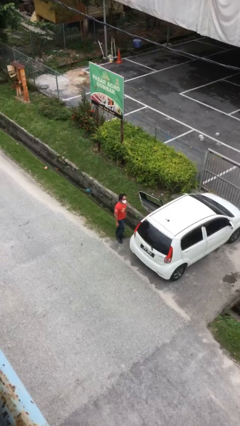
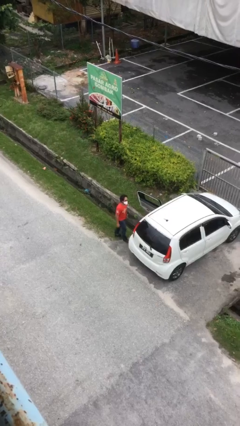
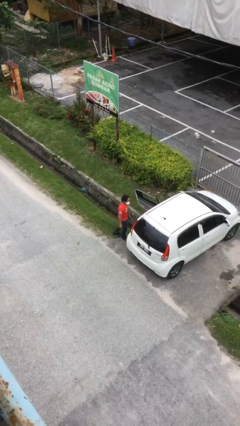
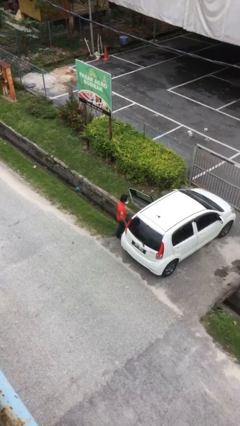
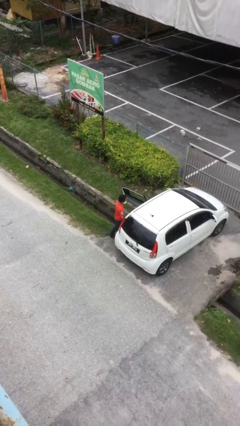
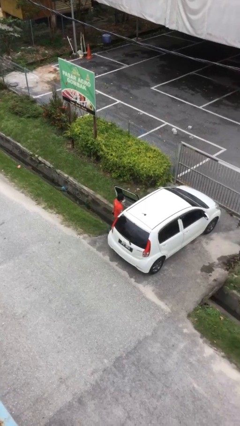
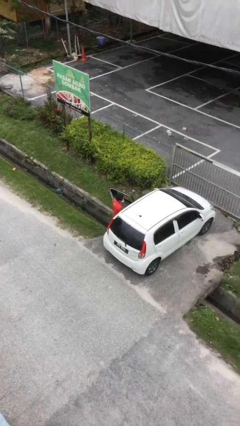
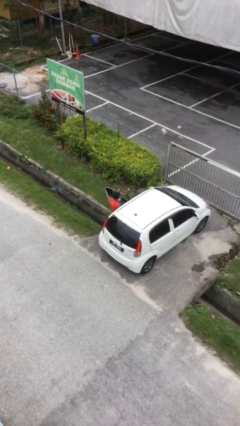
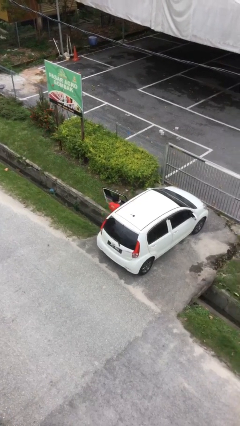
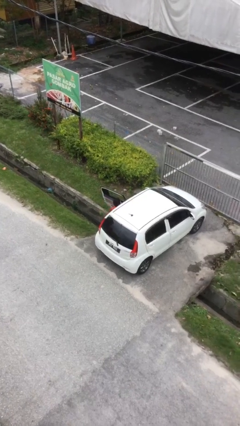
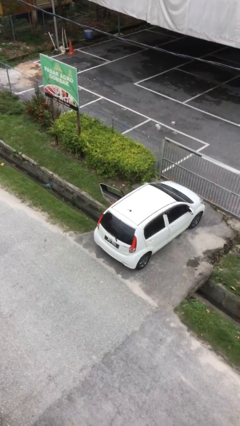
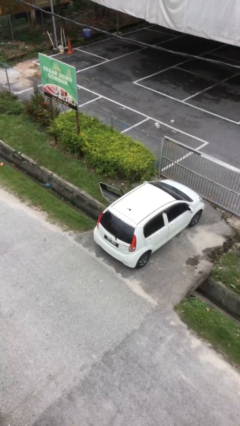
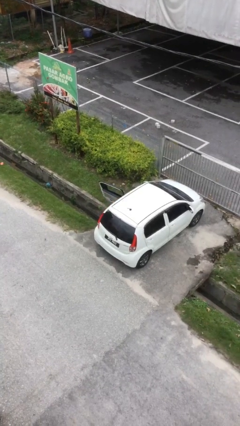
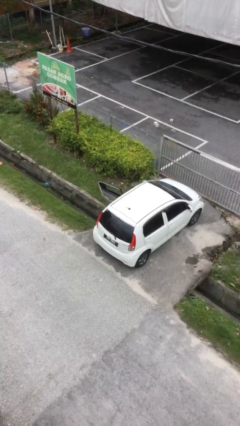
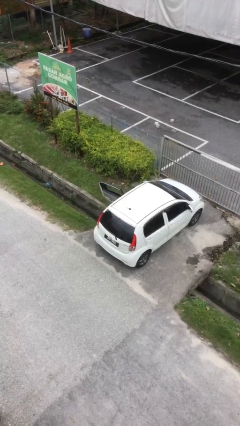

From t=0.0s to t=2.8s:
person enters car

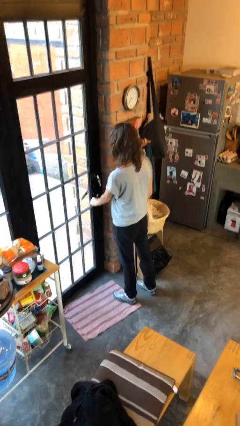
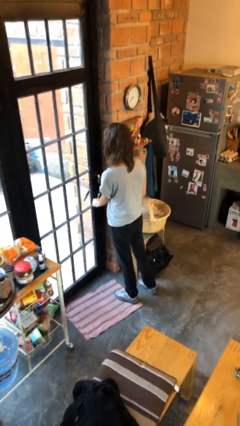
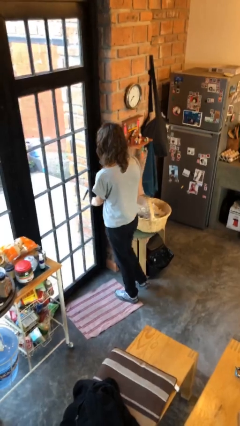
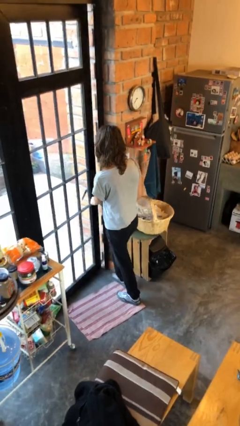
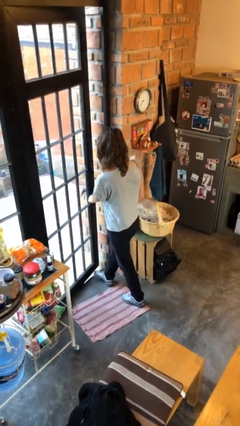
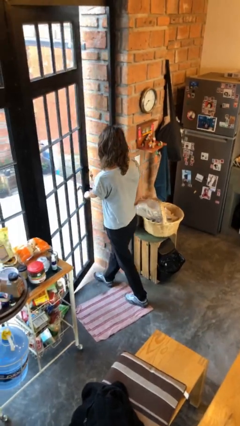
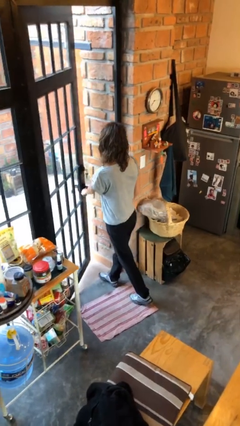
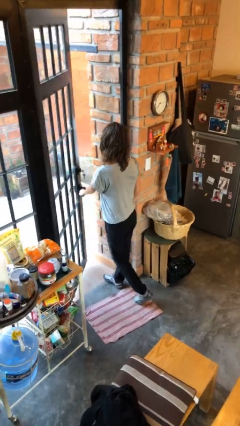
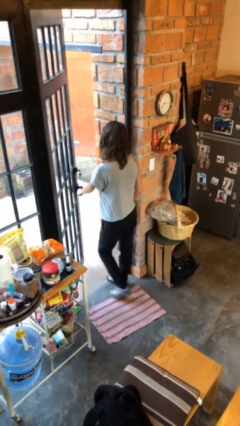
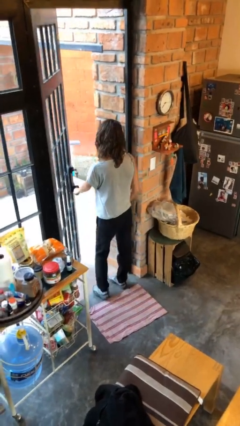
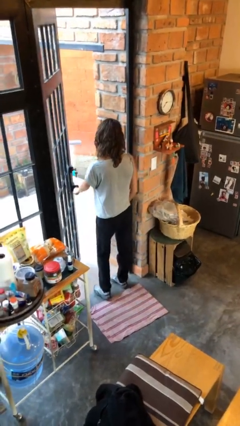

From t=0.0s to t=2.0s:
person opens facility door

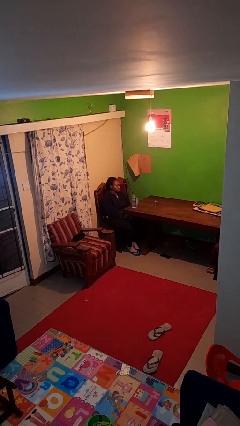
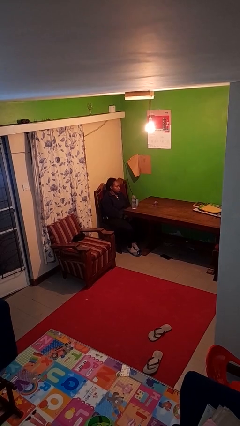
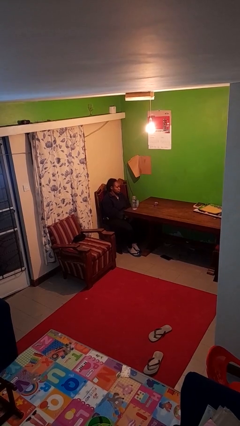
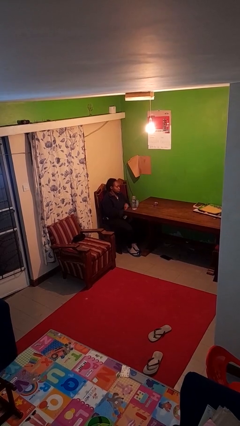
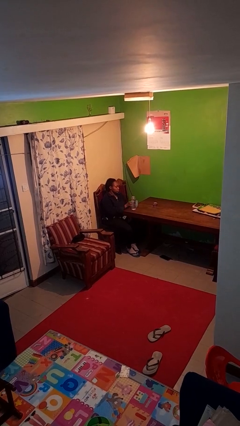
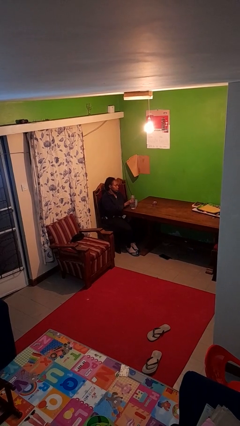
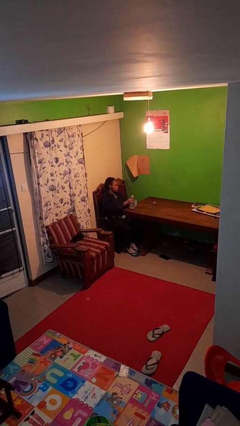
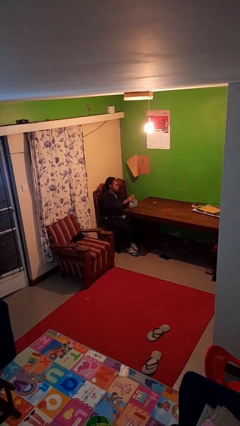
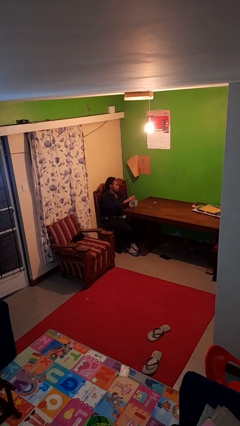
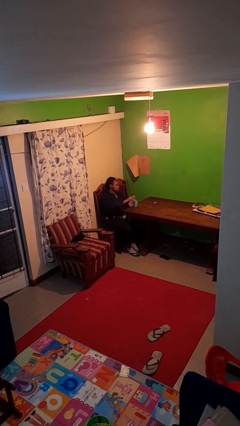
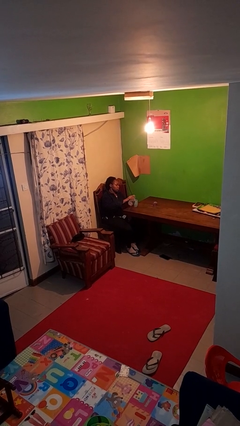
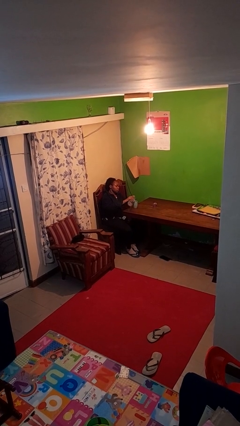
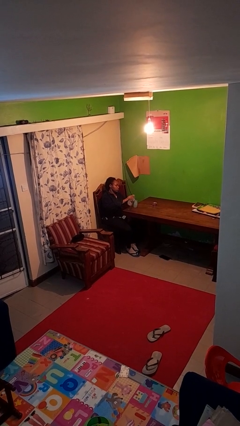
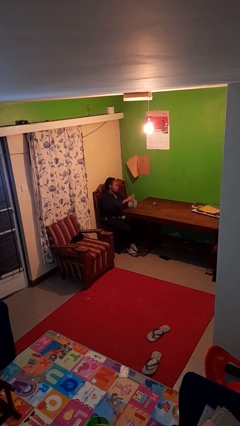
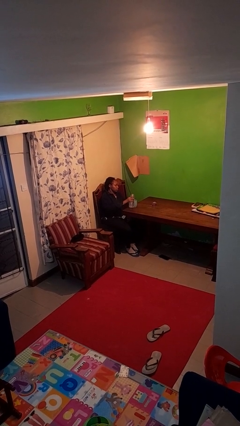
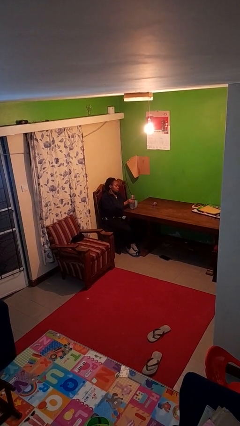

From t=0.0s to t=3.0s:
person pours liquid into cup

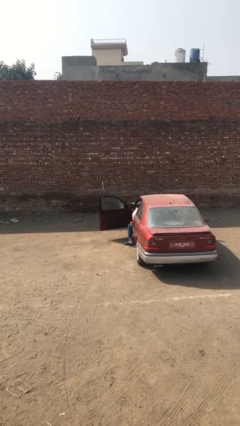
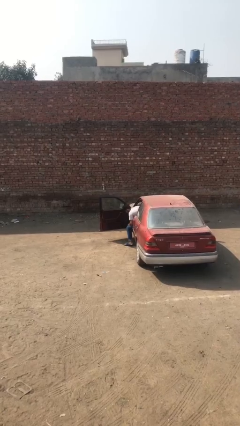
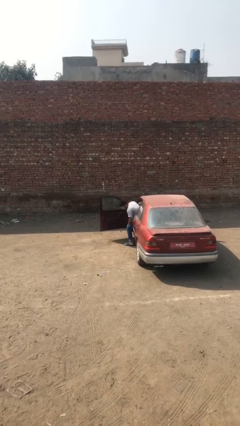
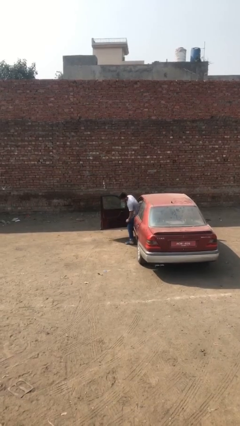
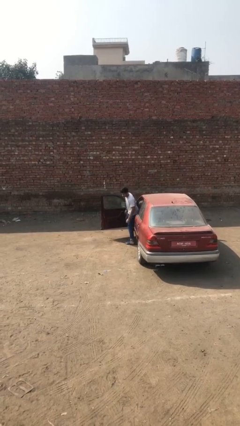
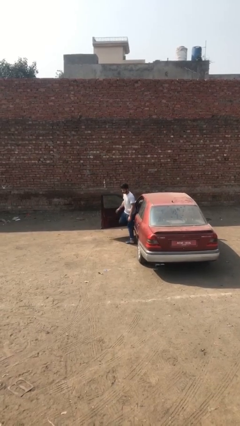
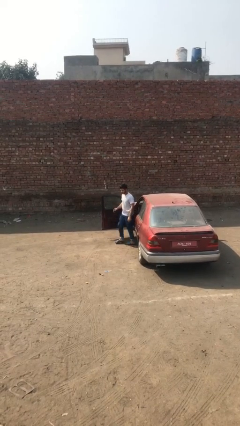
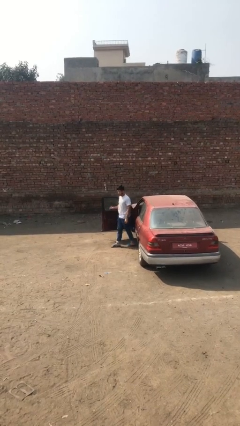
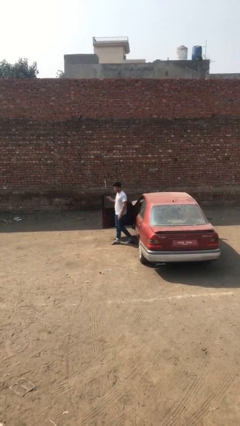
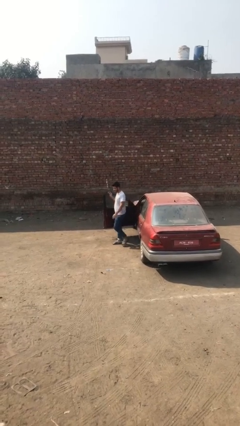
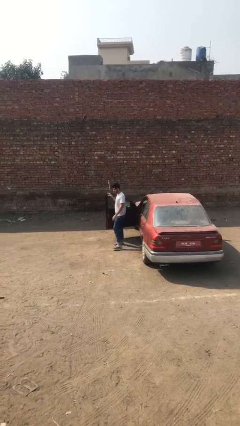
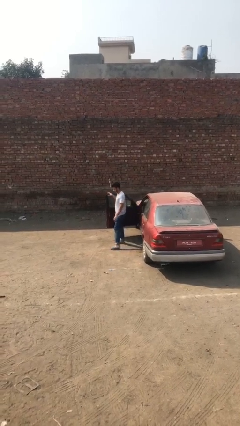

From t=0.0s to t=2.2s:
person exits car

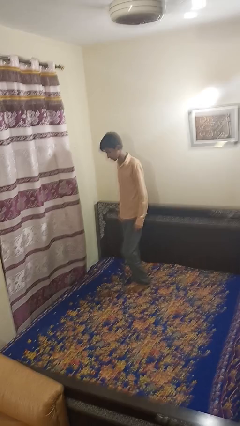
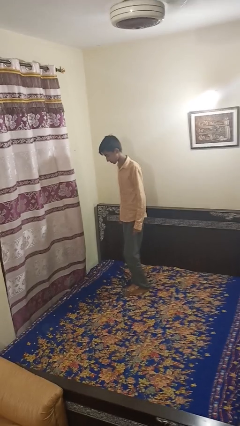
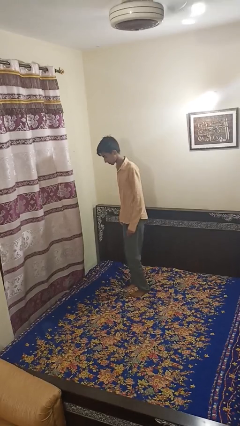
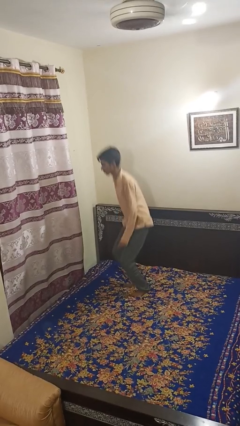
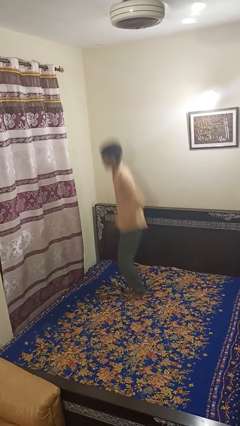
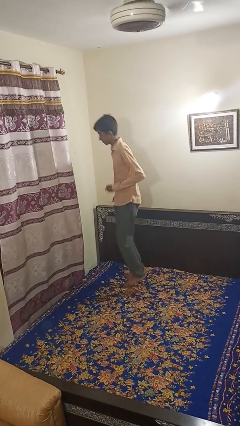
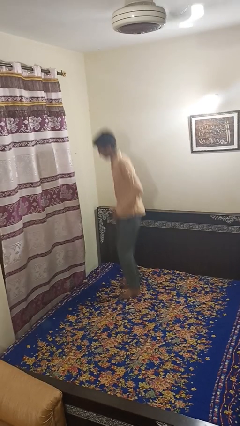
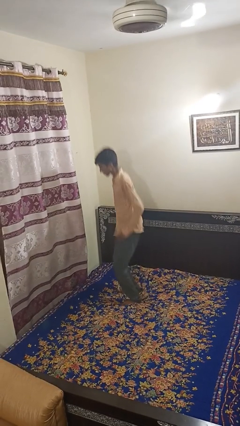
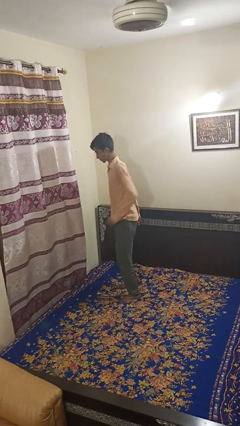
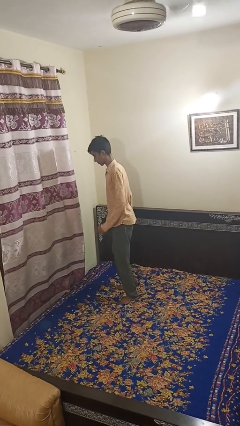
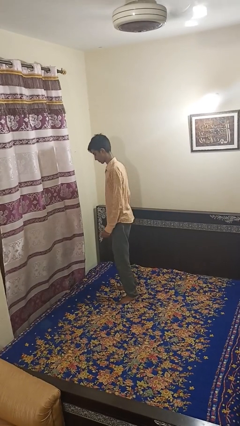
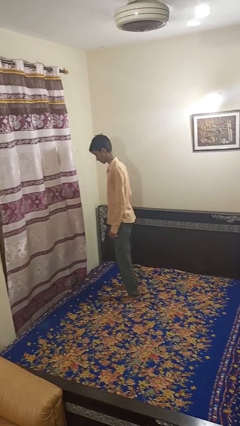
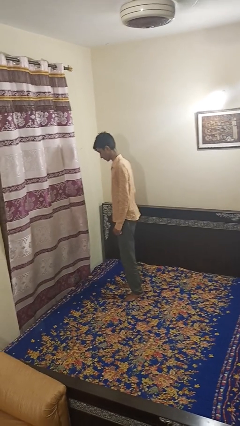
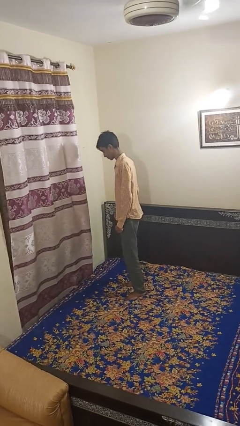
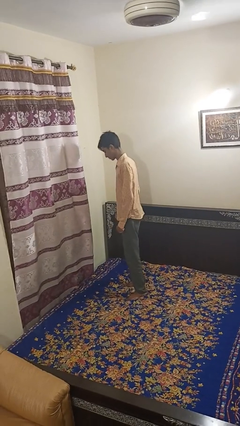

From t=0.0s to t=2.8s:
person jumps on bed

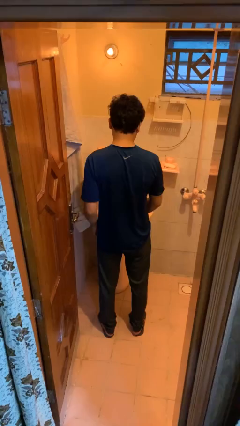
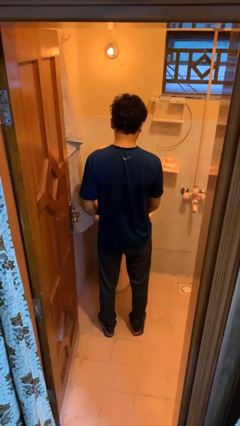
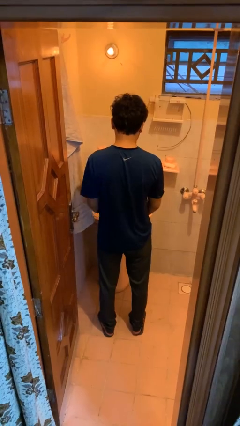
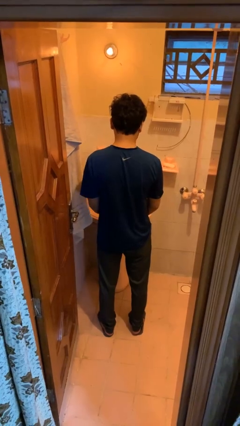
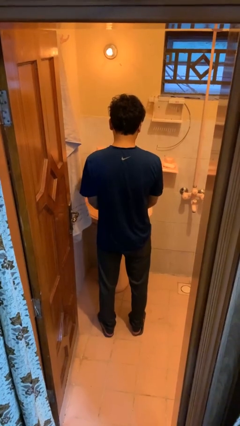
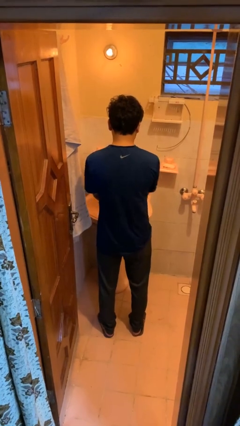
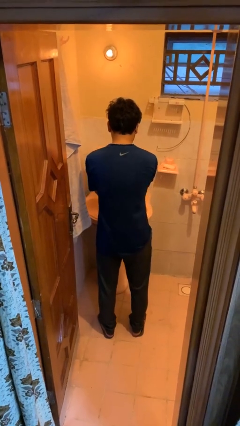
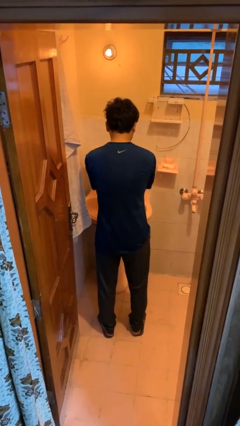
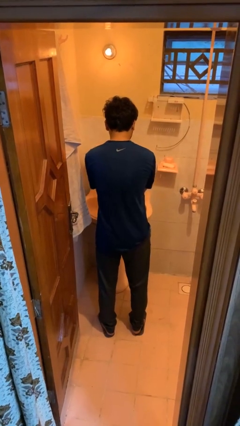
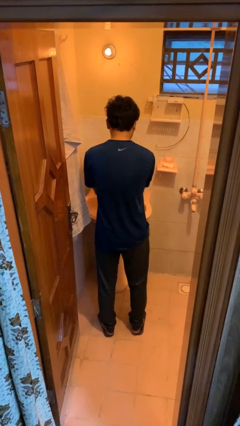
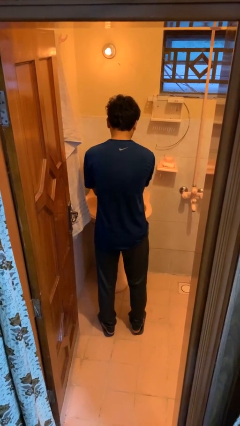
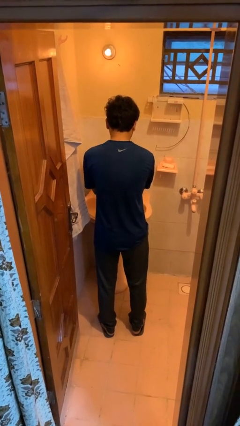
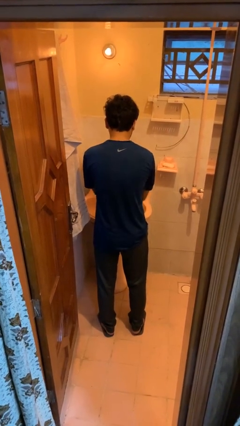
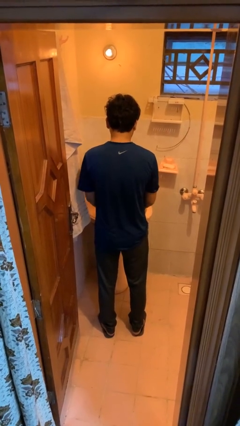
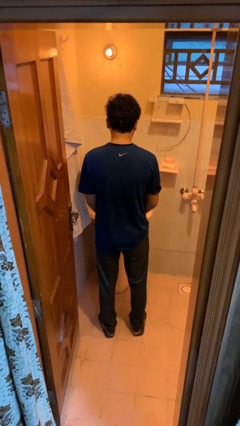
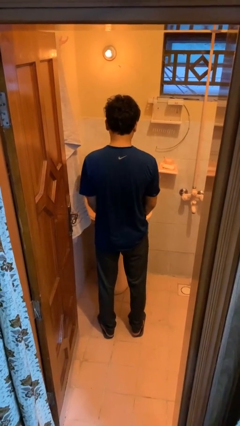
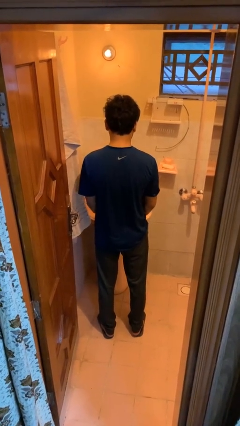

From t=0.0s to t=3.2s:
person washes hands

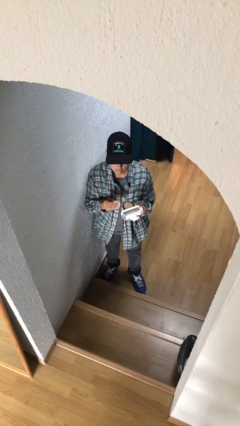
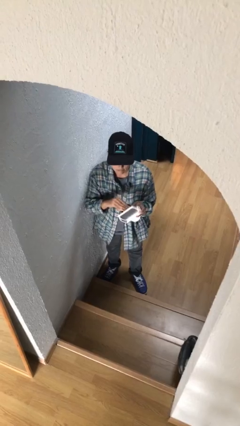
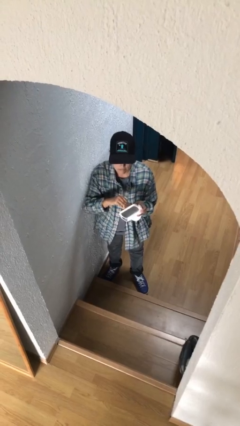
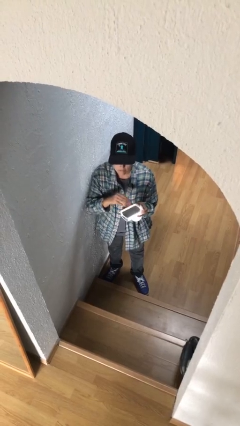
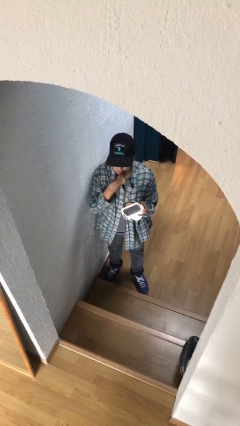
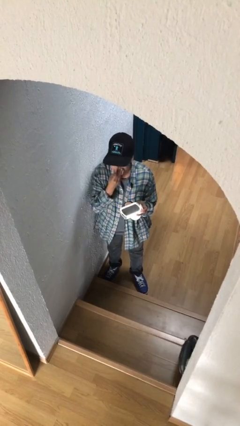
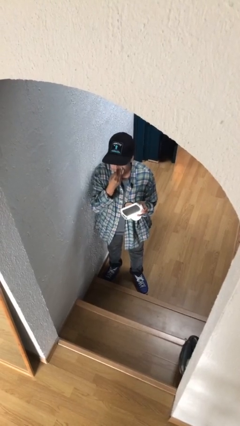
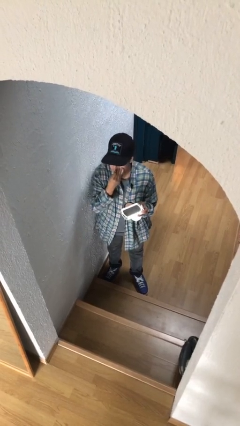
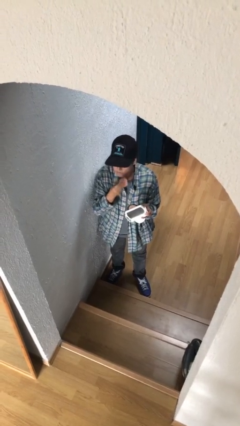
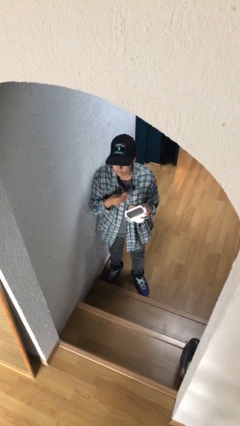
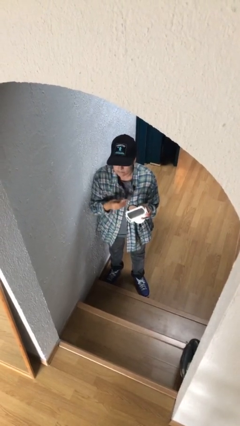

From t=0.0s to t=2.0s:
person applies foundation makeup
